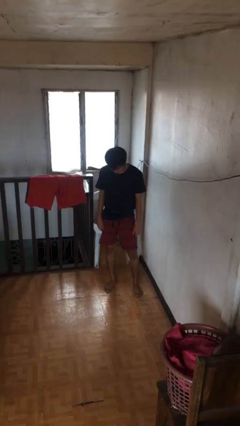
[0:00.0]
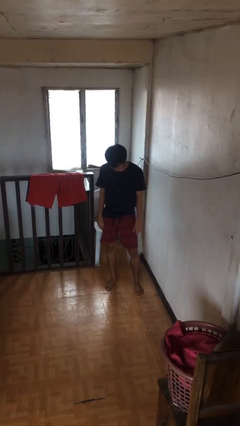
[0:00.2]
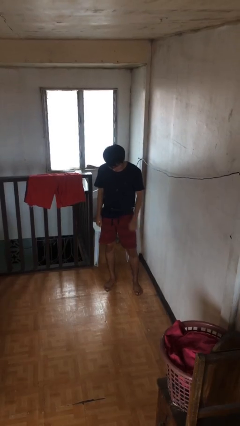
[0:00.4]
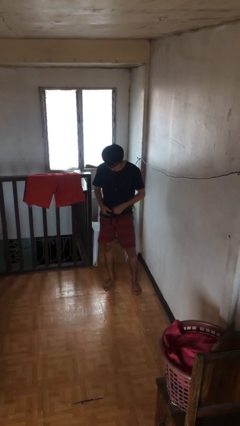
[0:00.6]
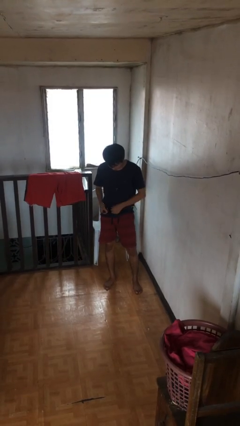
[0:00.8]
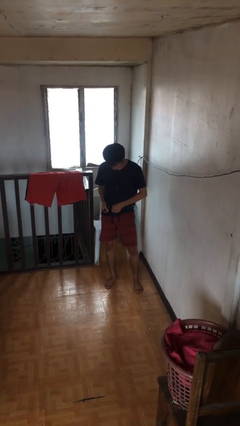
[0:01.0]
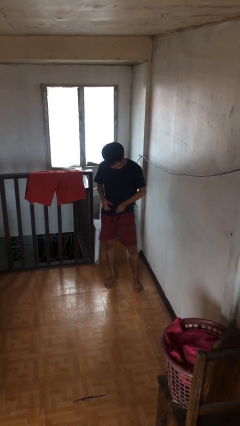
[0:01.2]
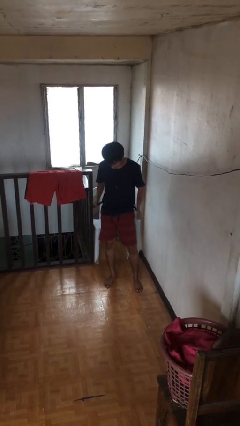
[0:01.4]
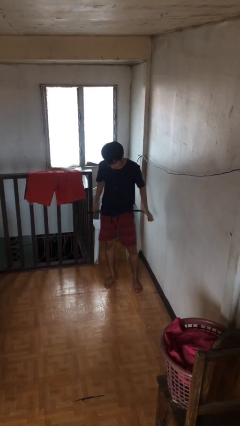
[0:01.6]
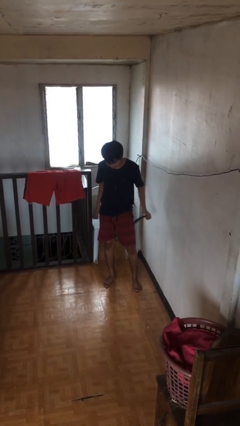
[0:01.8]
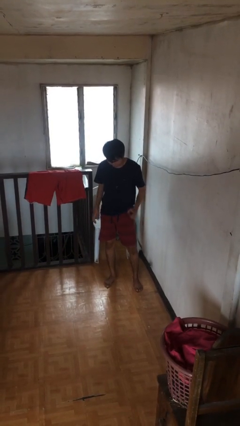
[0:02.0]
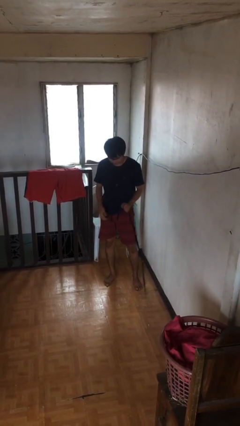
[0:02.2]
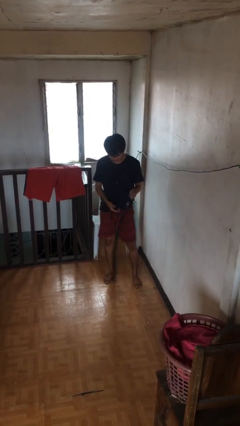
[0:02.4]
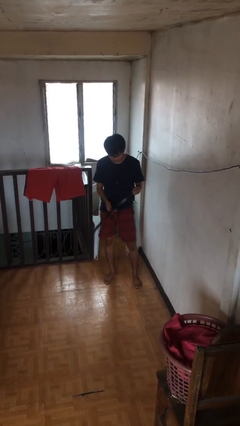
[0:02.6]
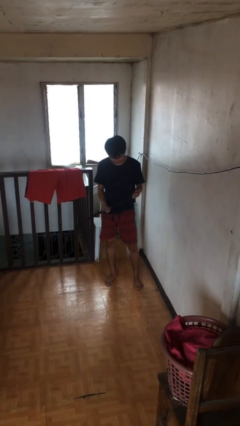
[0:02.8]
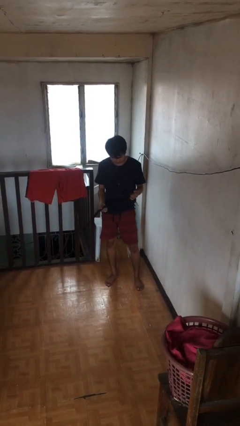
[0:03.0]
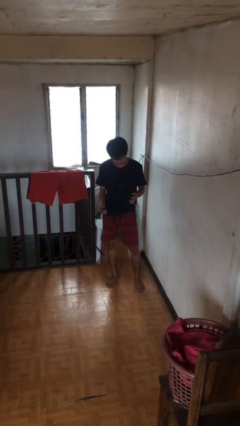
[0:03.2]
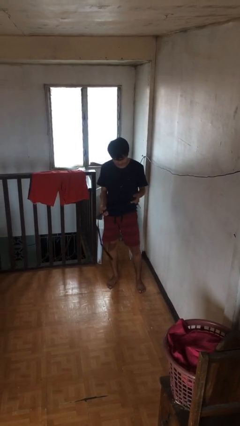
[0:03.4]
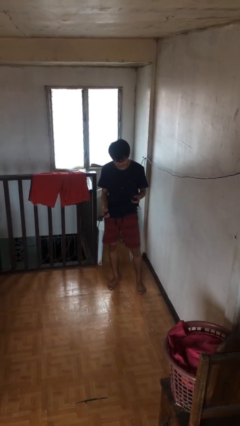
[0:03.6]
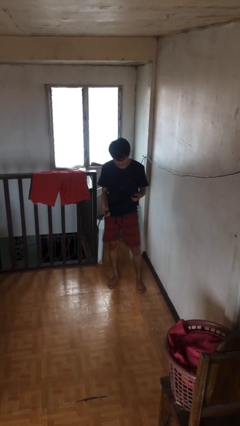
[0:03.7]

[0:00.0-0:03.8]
person takes off belt

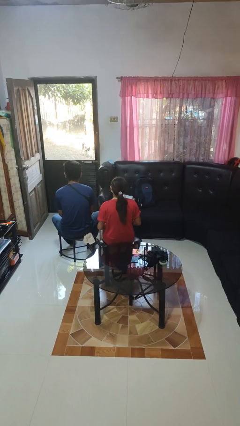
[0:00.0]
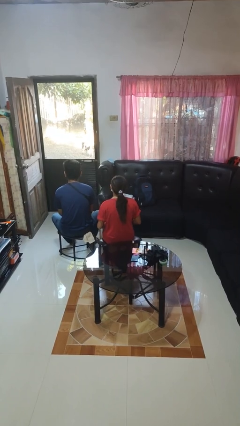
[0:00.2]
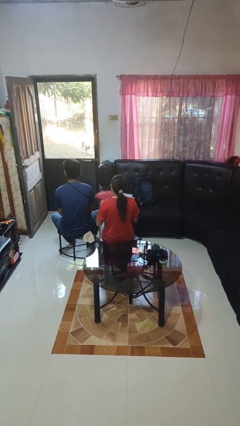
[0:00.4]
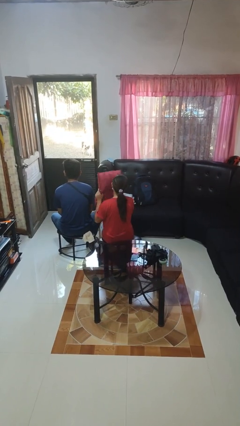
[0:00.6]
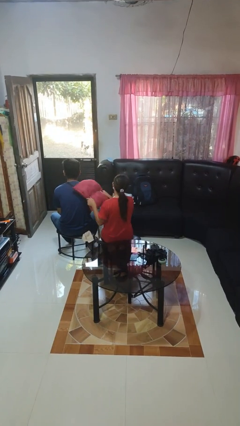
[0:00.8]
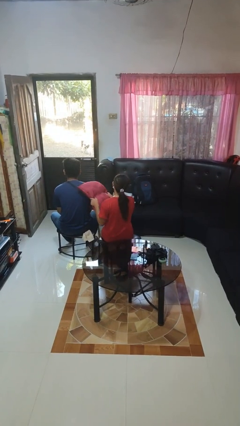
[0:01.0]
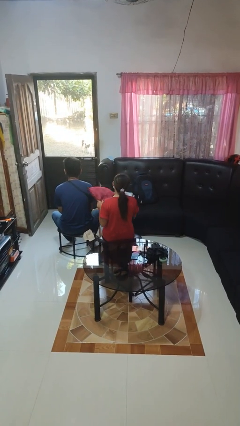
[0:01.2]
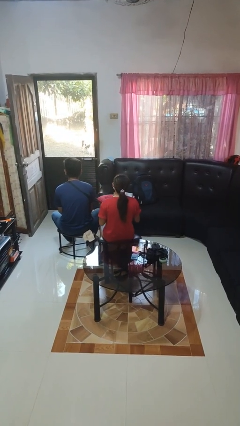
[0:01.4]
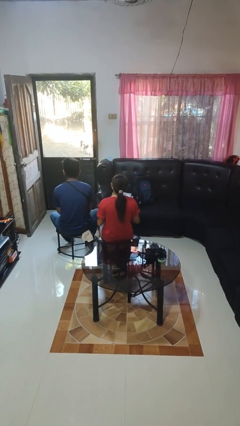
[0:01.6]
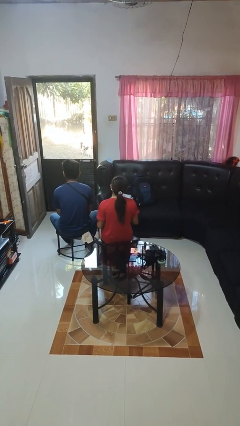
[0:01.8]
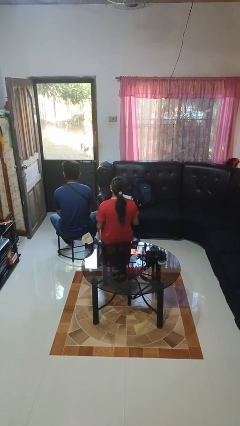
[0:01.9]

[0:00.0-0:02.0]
person hits person with pillow

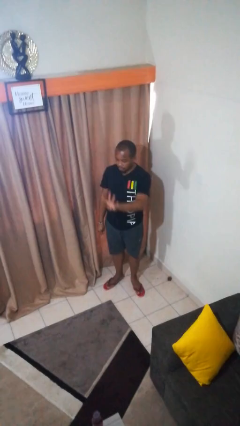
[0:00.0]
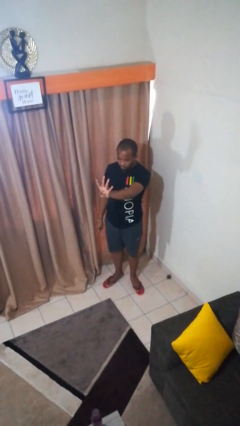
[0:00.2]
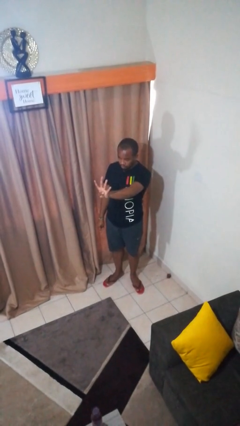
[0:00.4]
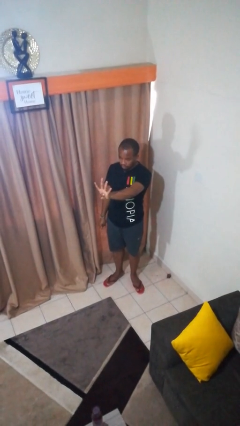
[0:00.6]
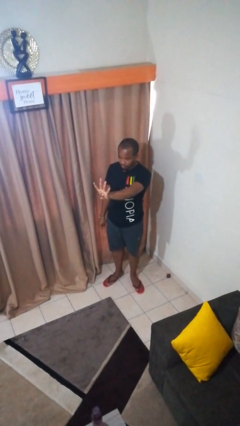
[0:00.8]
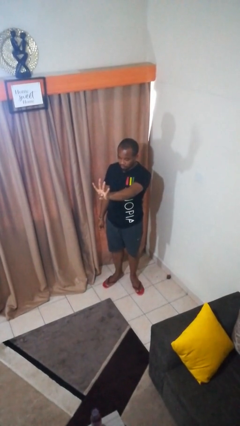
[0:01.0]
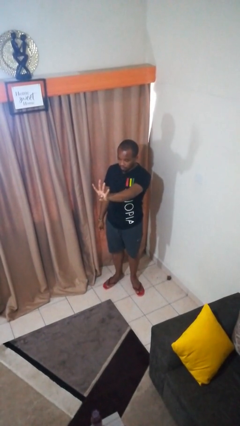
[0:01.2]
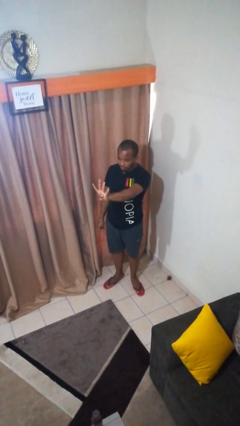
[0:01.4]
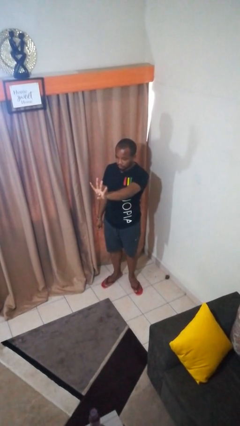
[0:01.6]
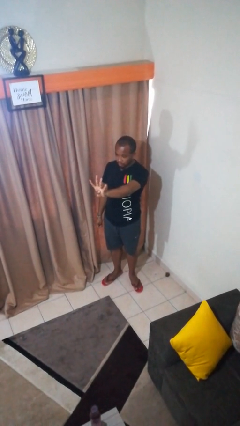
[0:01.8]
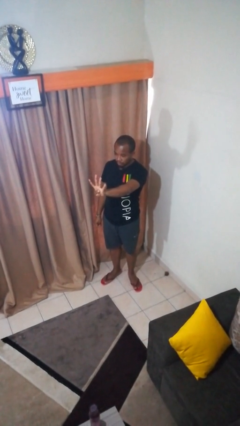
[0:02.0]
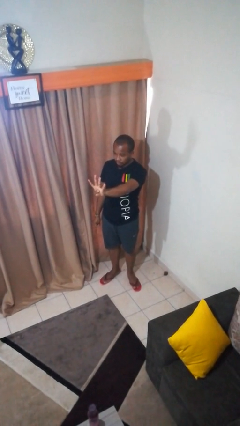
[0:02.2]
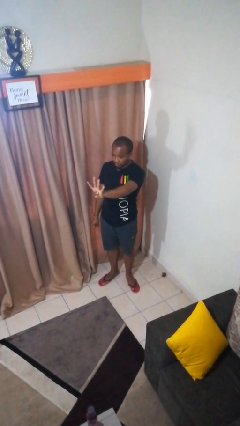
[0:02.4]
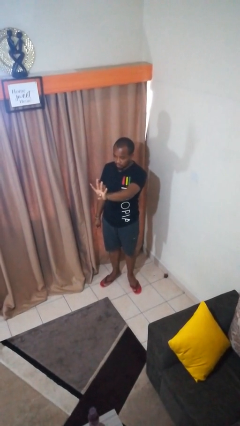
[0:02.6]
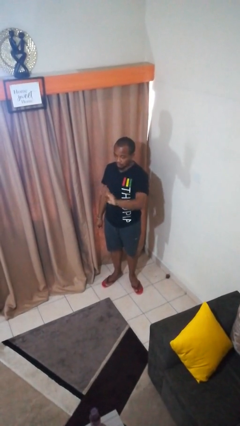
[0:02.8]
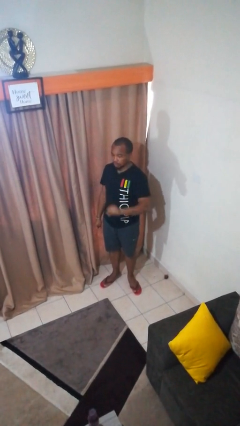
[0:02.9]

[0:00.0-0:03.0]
person gestures number four

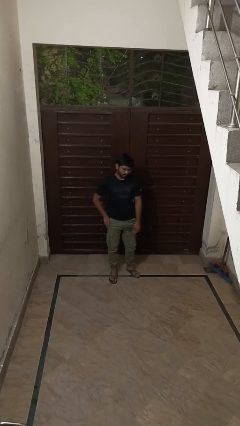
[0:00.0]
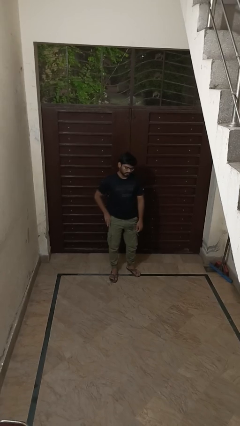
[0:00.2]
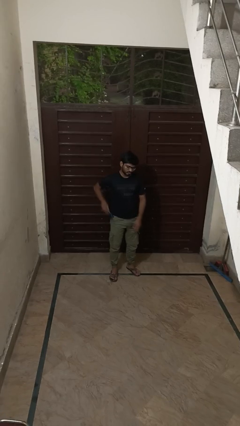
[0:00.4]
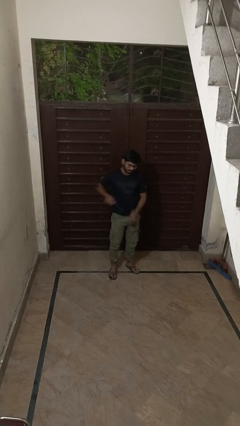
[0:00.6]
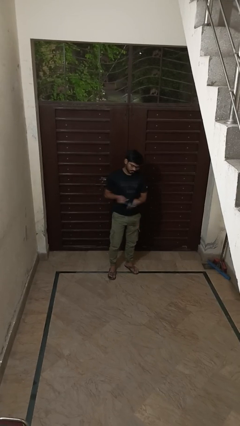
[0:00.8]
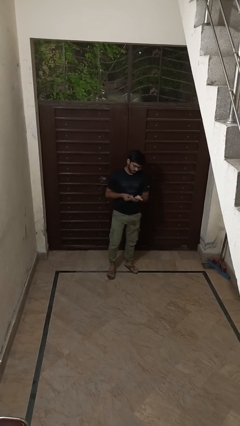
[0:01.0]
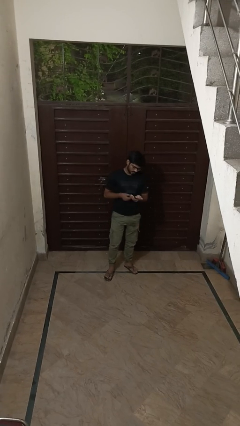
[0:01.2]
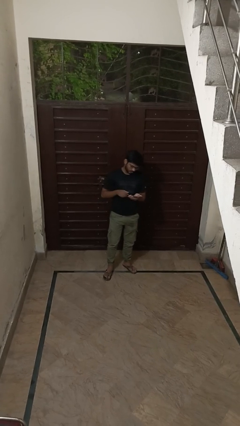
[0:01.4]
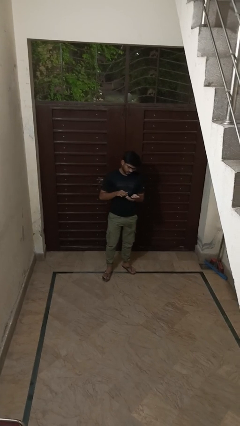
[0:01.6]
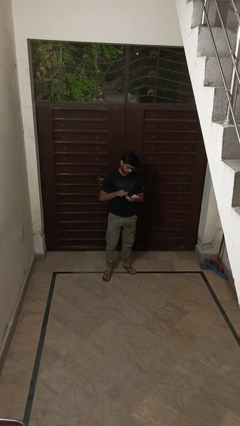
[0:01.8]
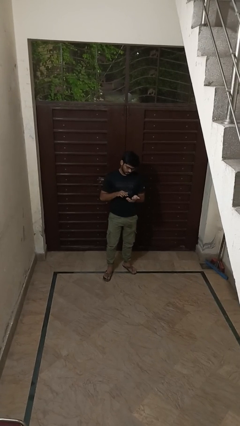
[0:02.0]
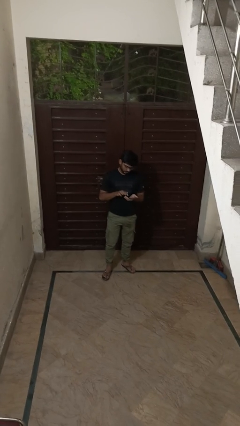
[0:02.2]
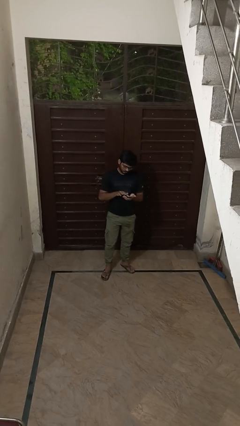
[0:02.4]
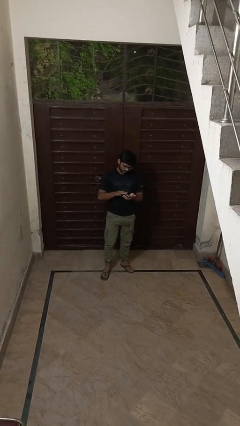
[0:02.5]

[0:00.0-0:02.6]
person takes phone from pocket

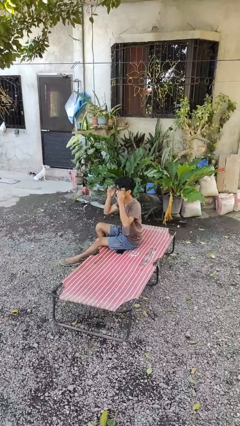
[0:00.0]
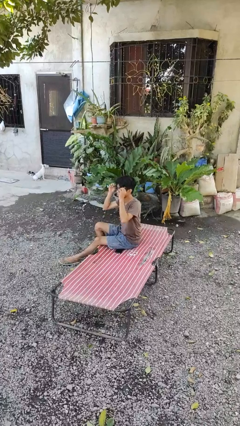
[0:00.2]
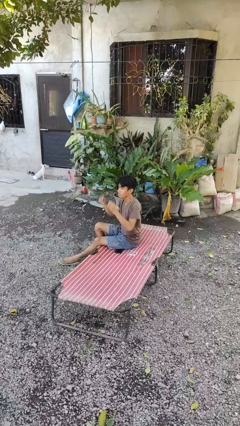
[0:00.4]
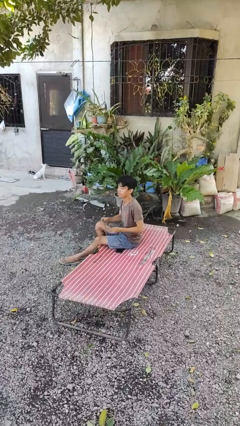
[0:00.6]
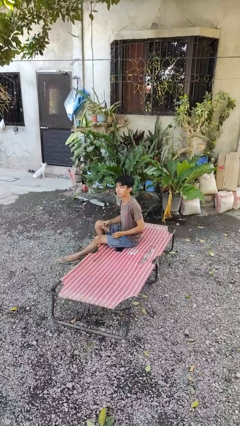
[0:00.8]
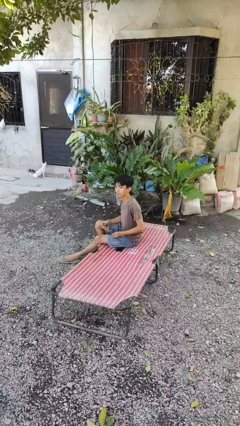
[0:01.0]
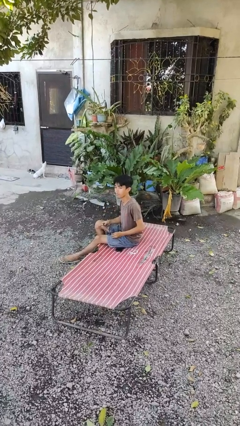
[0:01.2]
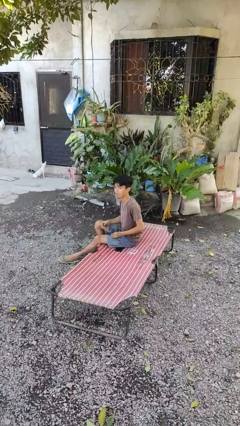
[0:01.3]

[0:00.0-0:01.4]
person takes off glasses

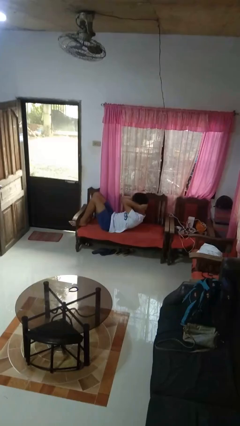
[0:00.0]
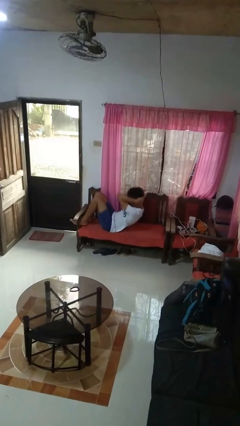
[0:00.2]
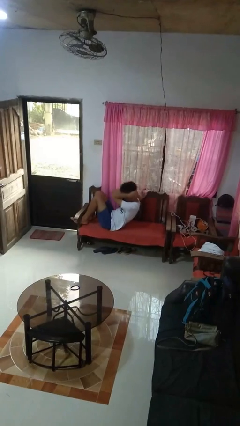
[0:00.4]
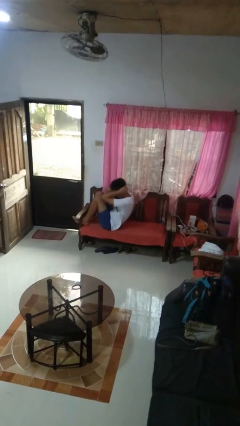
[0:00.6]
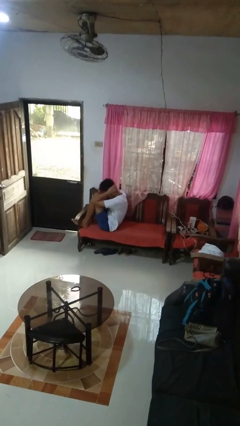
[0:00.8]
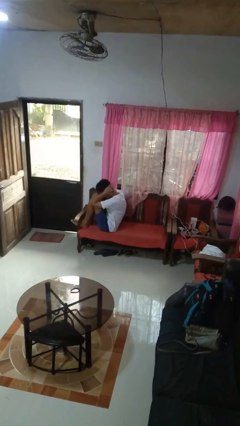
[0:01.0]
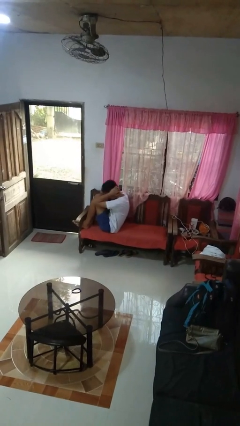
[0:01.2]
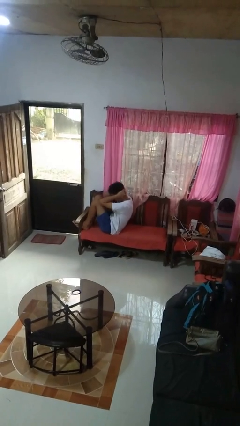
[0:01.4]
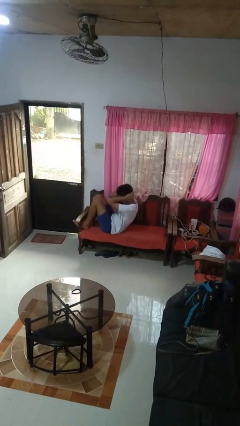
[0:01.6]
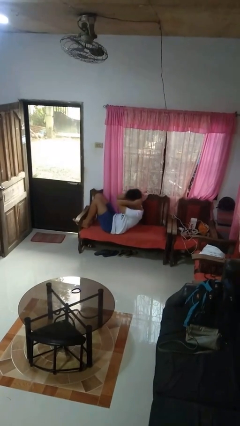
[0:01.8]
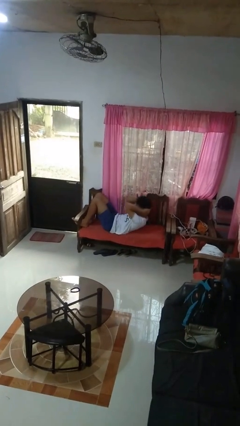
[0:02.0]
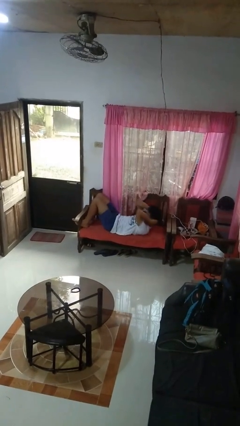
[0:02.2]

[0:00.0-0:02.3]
person exercises with situp

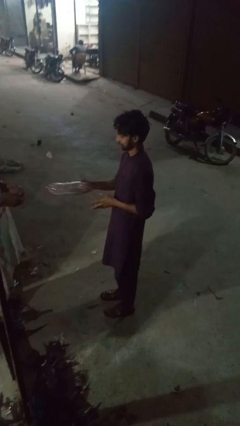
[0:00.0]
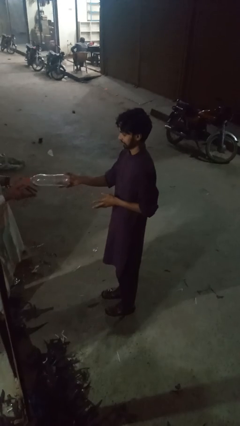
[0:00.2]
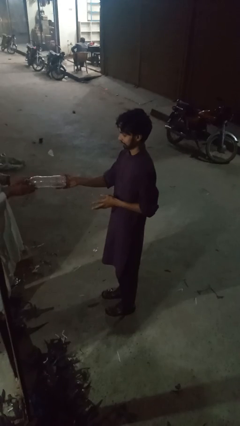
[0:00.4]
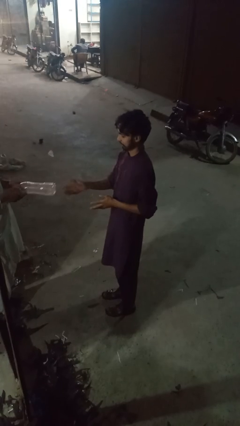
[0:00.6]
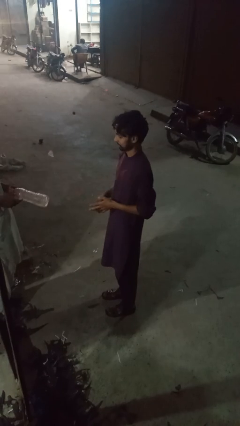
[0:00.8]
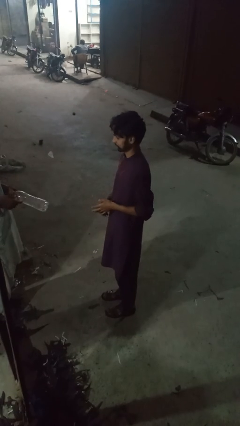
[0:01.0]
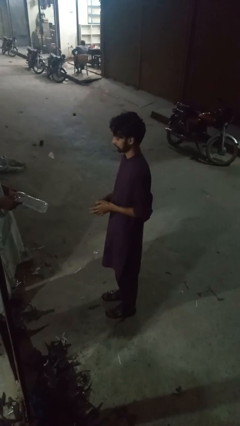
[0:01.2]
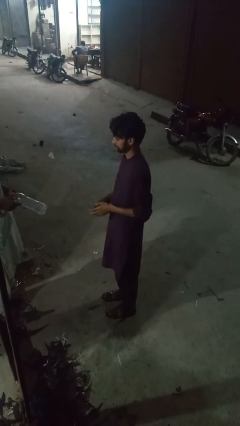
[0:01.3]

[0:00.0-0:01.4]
person throws object to person

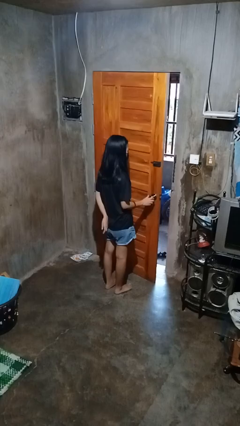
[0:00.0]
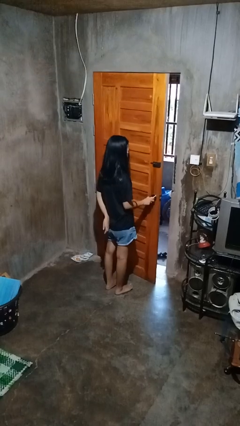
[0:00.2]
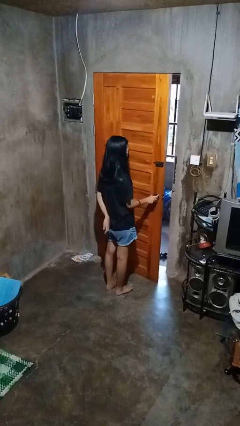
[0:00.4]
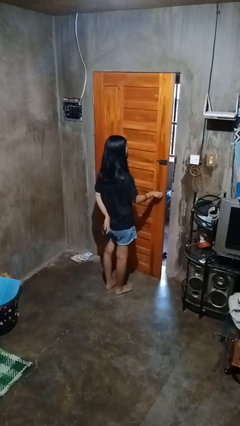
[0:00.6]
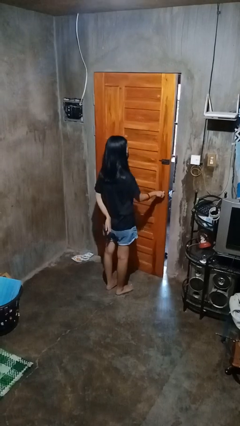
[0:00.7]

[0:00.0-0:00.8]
person closes facility door
